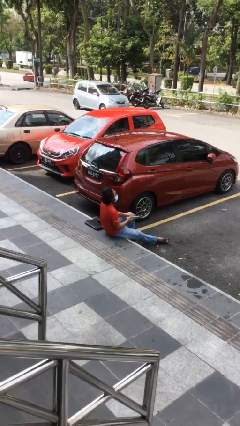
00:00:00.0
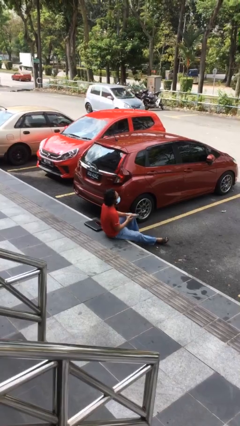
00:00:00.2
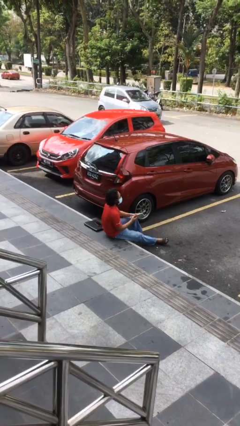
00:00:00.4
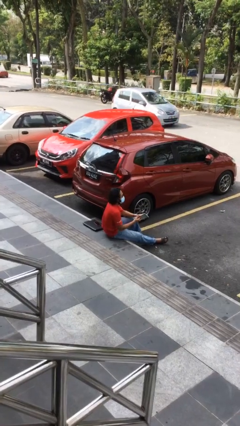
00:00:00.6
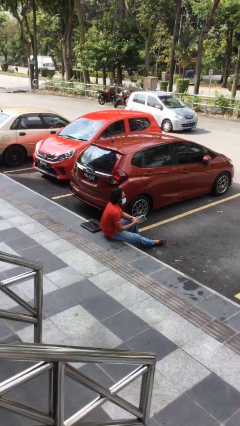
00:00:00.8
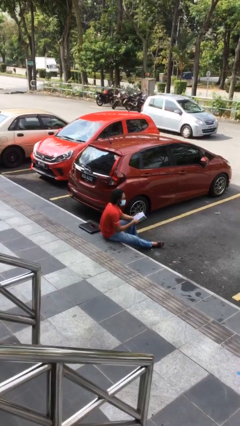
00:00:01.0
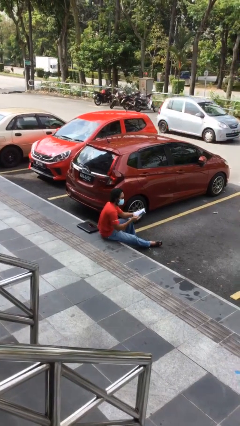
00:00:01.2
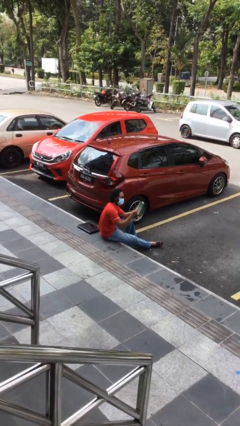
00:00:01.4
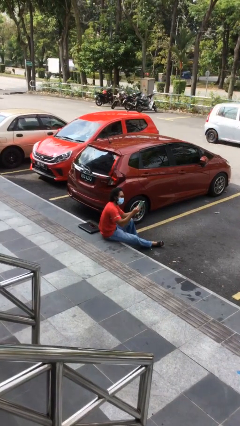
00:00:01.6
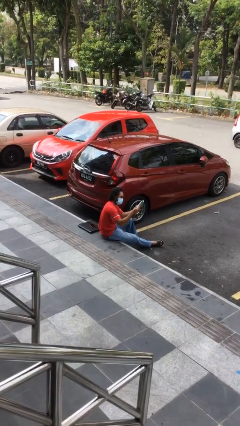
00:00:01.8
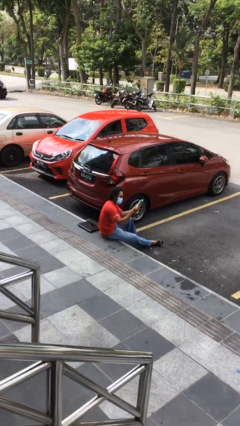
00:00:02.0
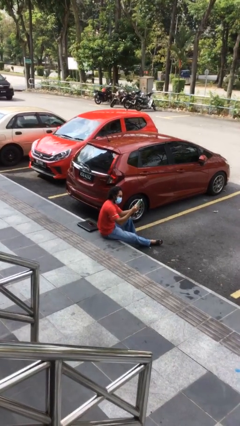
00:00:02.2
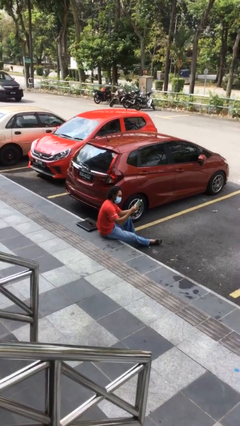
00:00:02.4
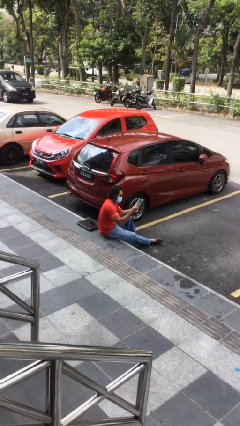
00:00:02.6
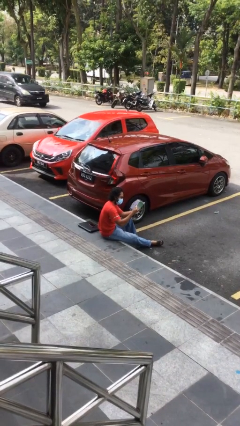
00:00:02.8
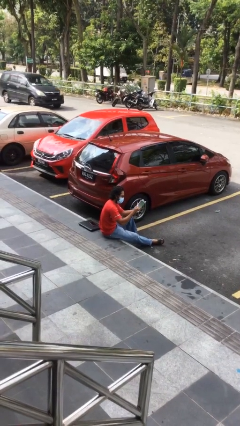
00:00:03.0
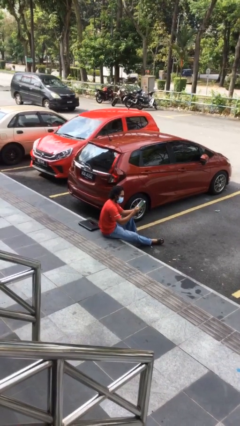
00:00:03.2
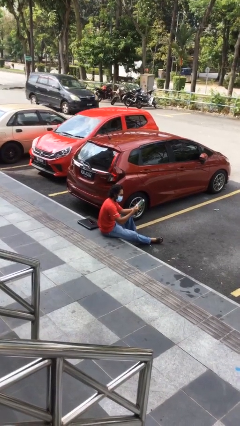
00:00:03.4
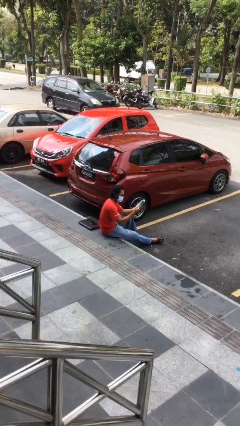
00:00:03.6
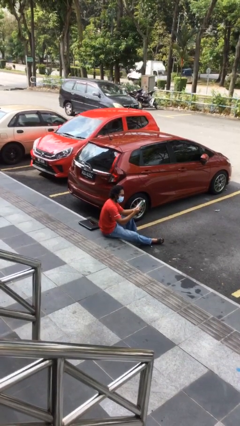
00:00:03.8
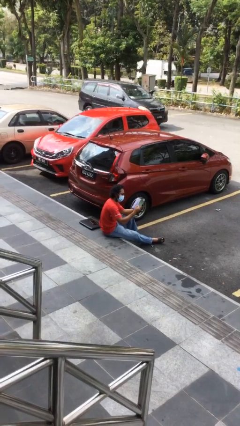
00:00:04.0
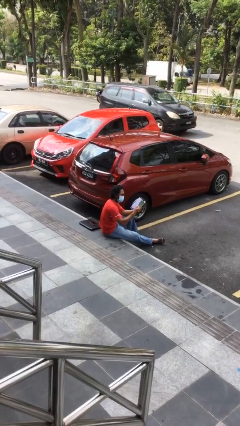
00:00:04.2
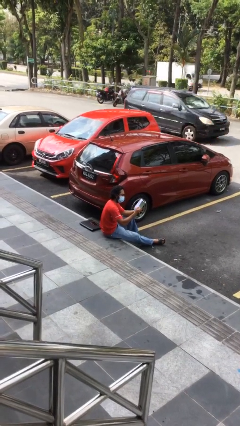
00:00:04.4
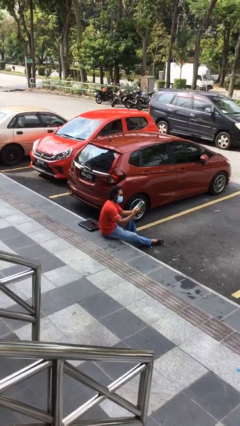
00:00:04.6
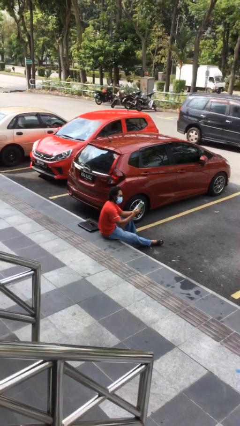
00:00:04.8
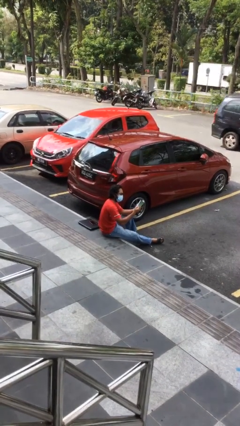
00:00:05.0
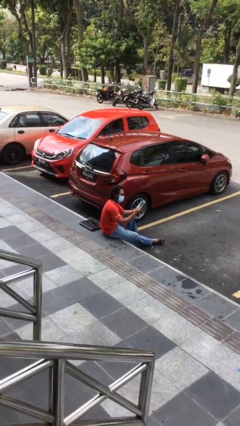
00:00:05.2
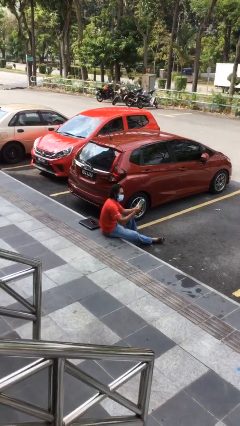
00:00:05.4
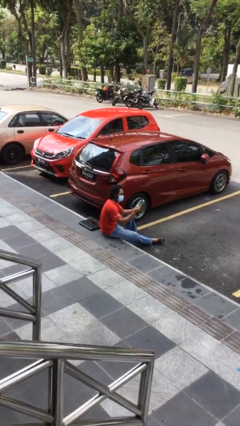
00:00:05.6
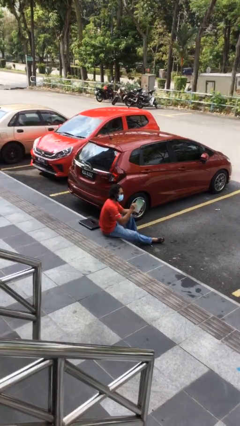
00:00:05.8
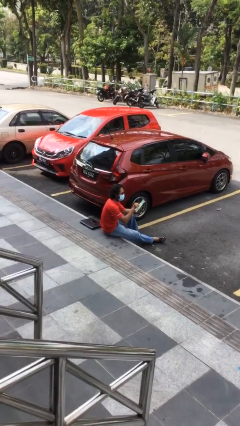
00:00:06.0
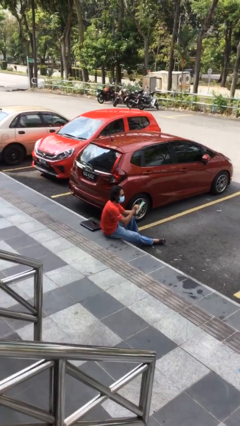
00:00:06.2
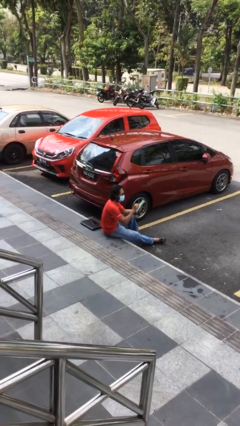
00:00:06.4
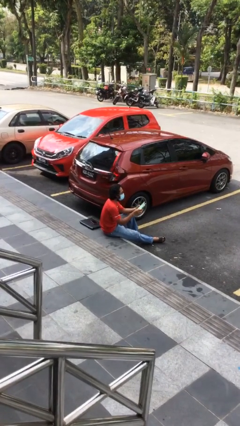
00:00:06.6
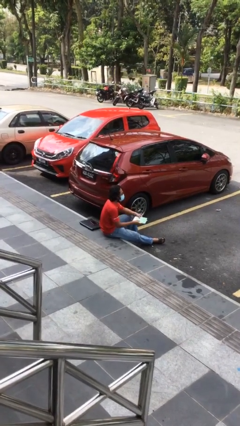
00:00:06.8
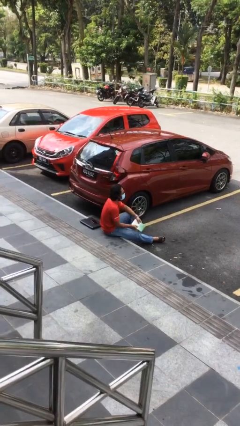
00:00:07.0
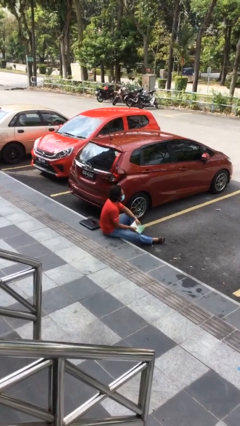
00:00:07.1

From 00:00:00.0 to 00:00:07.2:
person reads document

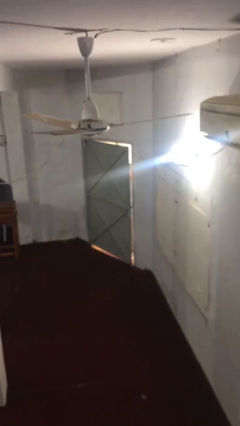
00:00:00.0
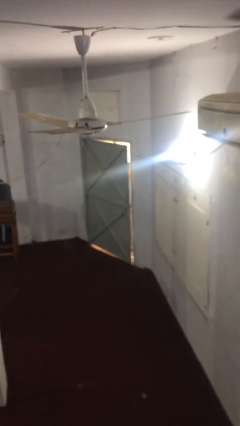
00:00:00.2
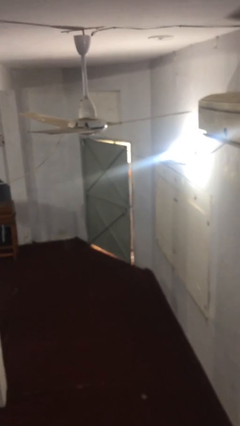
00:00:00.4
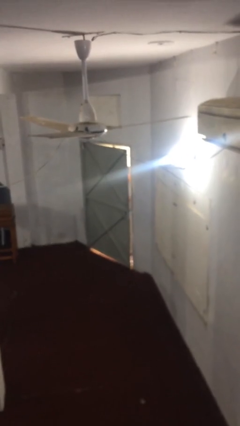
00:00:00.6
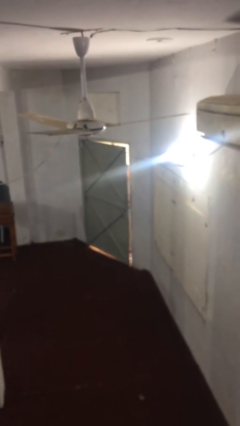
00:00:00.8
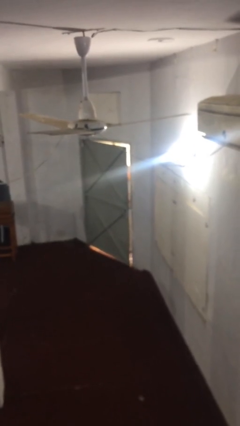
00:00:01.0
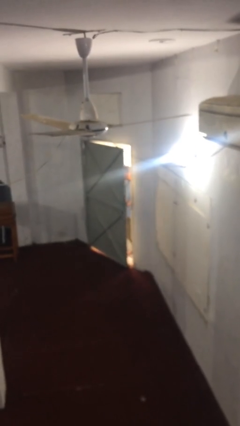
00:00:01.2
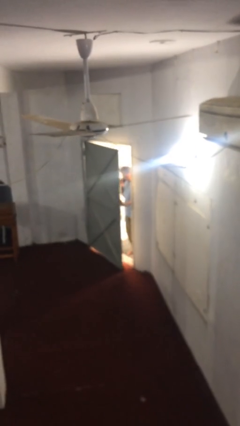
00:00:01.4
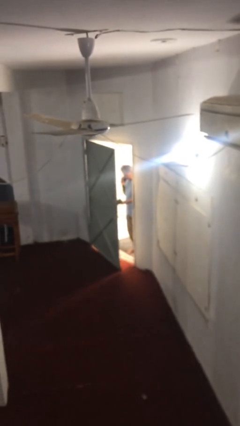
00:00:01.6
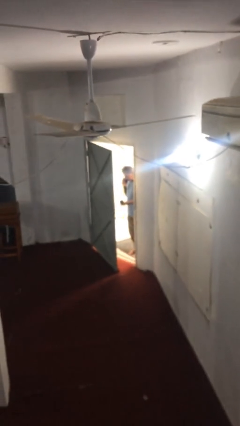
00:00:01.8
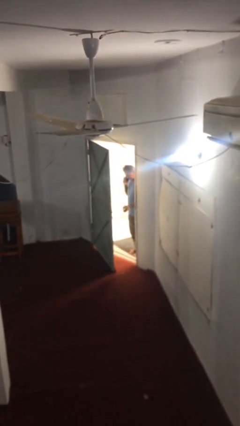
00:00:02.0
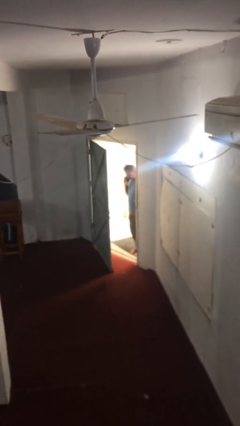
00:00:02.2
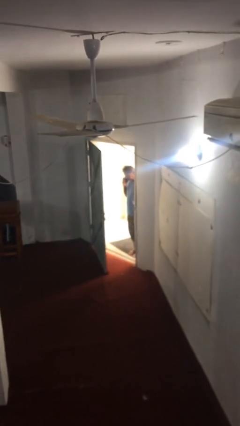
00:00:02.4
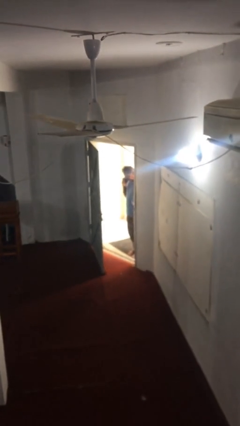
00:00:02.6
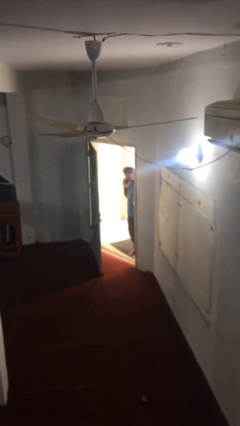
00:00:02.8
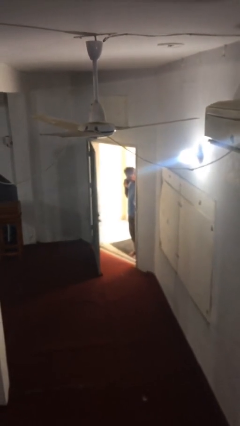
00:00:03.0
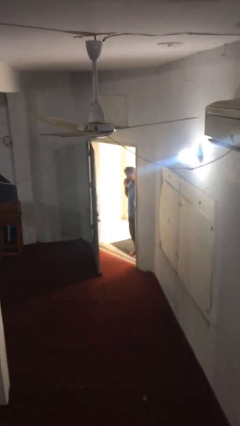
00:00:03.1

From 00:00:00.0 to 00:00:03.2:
person opens facility door

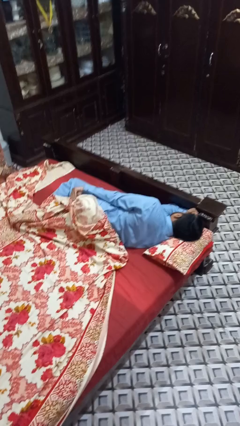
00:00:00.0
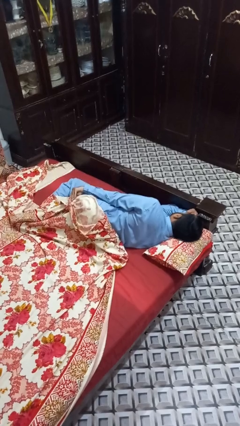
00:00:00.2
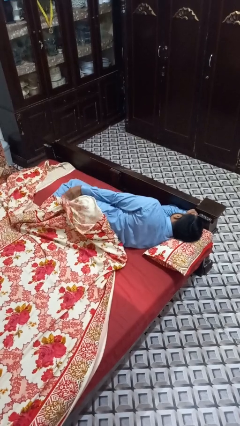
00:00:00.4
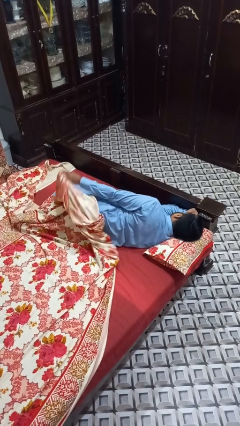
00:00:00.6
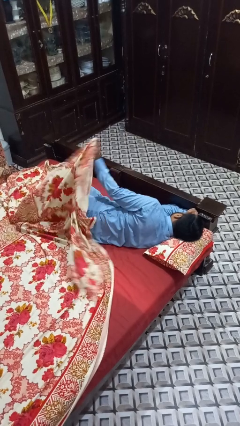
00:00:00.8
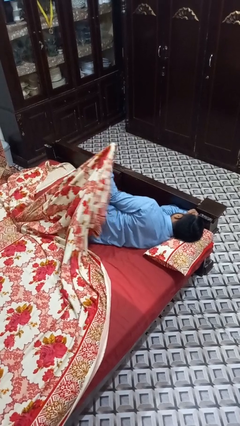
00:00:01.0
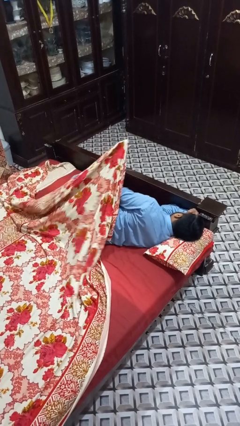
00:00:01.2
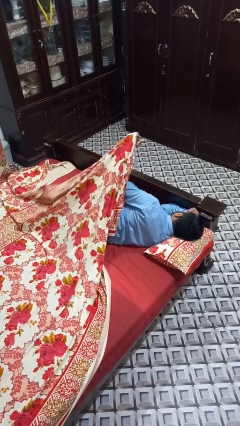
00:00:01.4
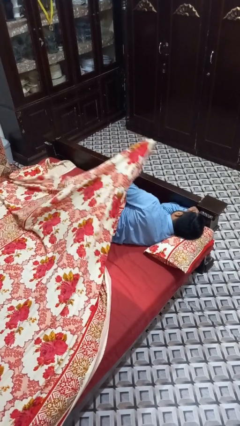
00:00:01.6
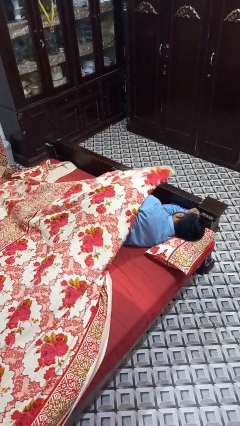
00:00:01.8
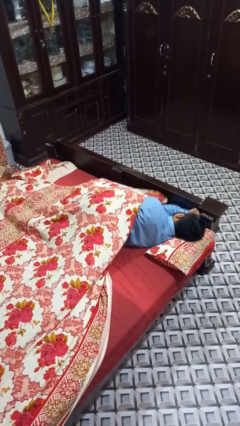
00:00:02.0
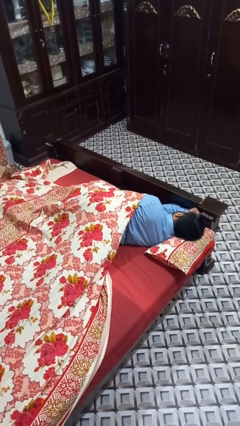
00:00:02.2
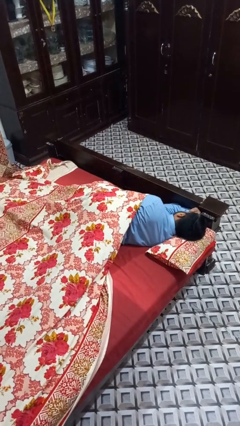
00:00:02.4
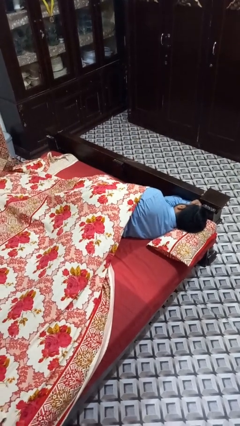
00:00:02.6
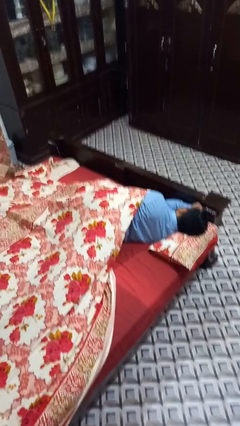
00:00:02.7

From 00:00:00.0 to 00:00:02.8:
person covers with bedsheets

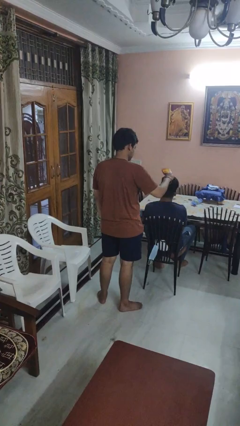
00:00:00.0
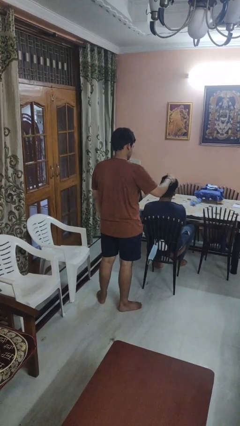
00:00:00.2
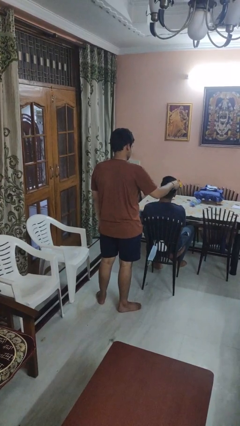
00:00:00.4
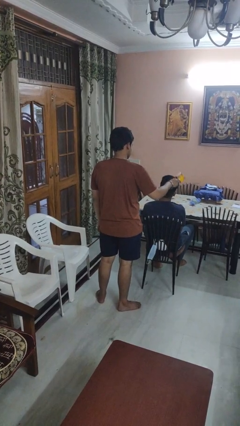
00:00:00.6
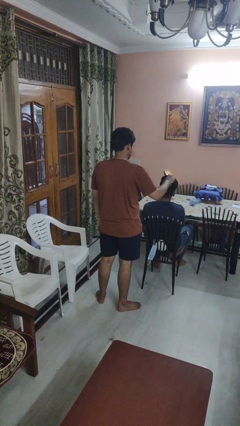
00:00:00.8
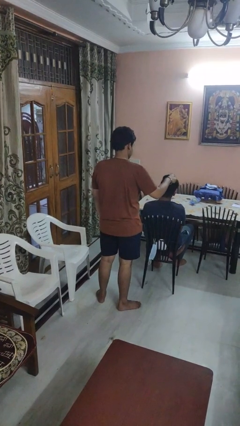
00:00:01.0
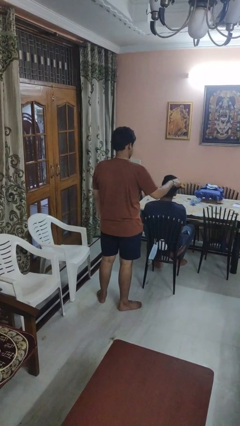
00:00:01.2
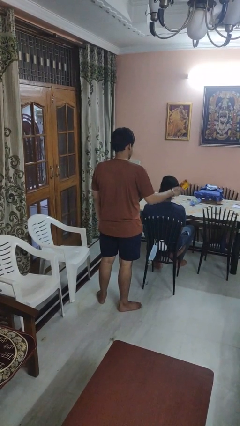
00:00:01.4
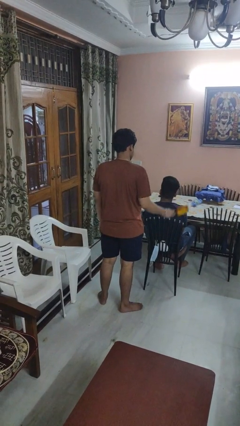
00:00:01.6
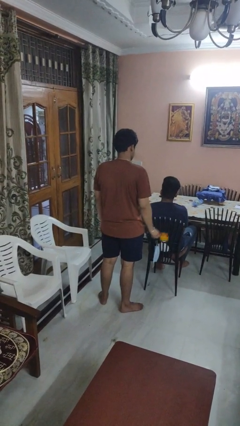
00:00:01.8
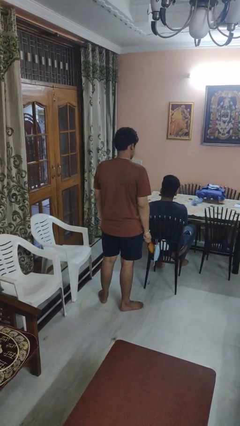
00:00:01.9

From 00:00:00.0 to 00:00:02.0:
person brushes hair of person

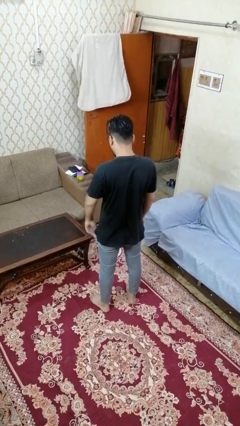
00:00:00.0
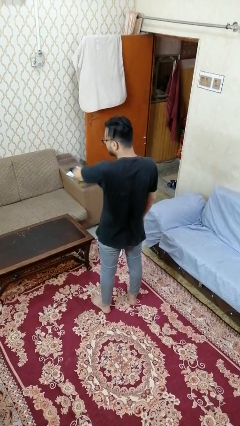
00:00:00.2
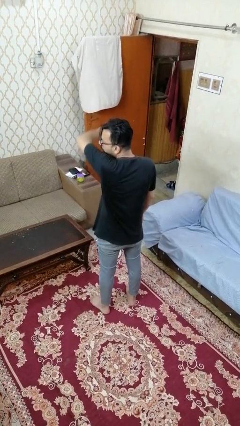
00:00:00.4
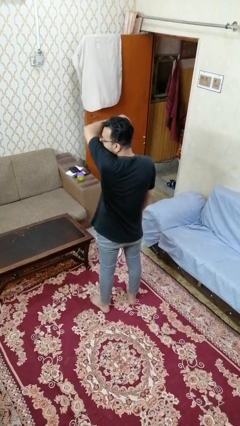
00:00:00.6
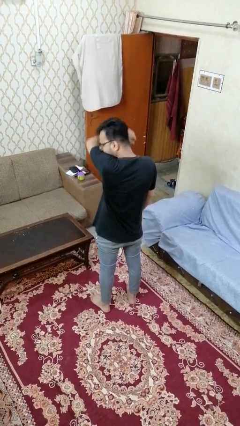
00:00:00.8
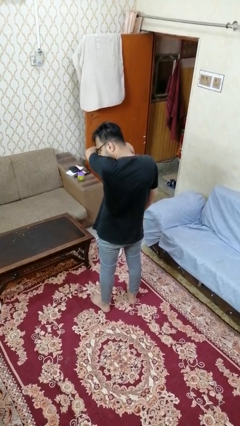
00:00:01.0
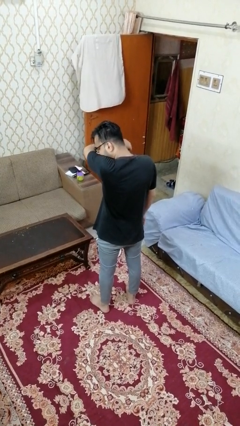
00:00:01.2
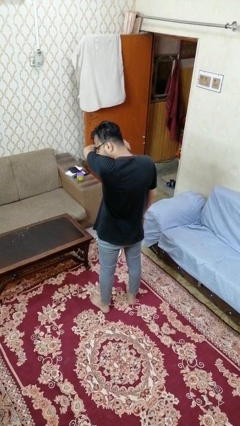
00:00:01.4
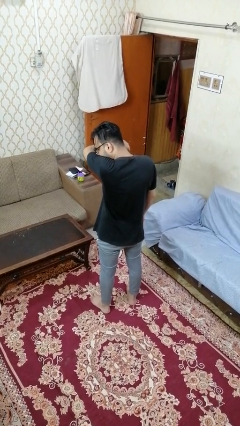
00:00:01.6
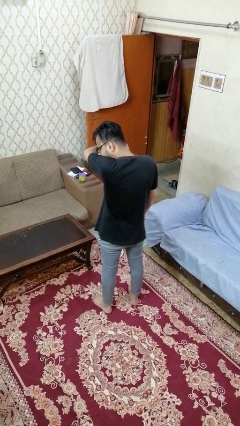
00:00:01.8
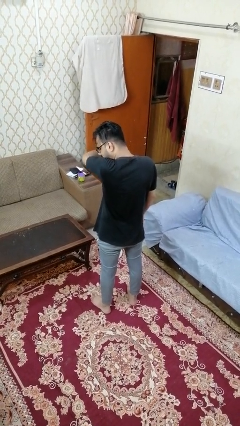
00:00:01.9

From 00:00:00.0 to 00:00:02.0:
person sneezes into arm

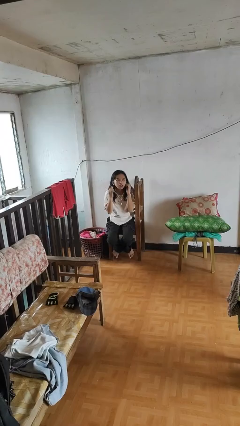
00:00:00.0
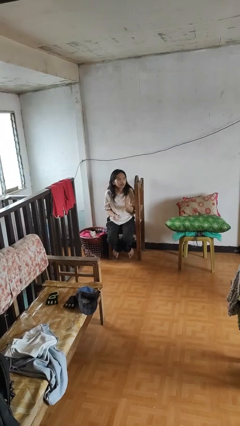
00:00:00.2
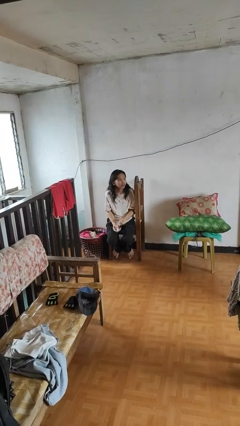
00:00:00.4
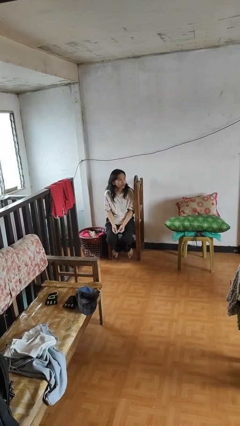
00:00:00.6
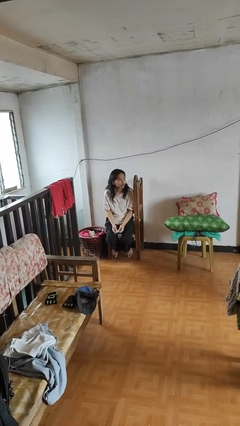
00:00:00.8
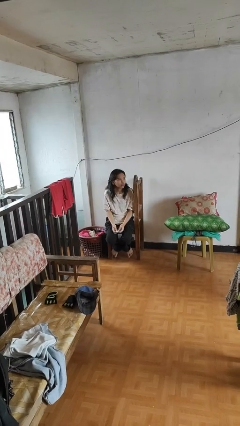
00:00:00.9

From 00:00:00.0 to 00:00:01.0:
person takes off headphones
